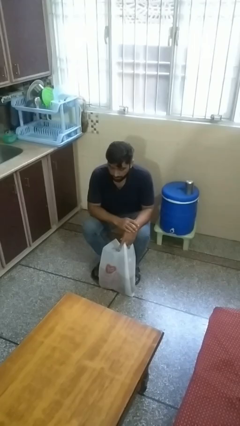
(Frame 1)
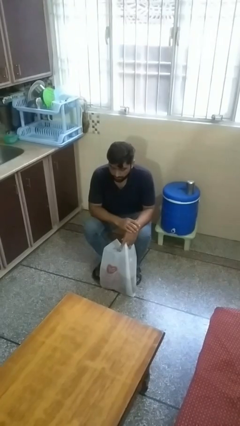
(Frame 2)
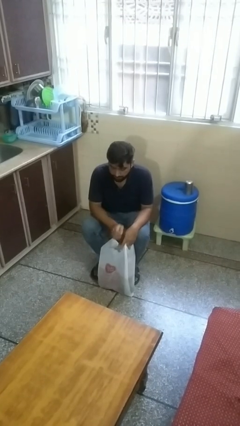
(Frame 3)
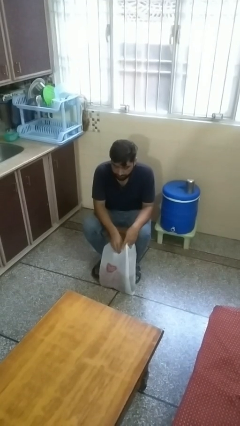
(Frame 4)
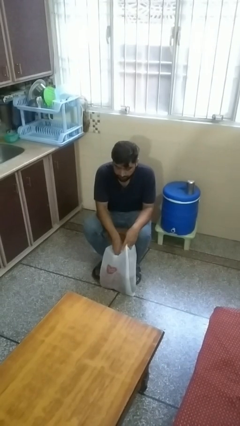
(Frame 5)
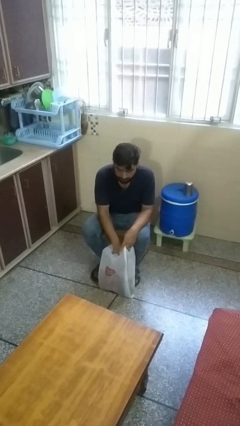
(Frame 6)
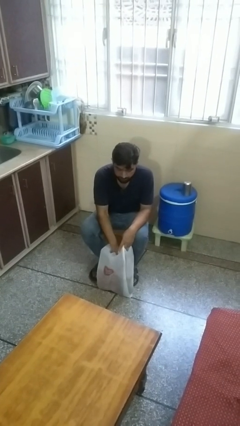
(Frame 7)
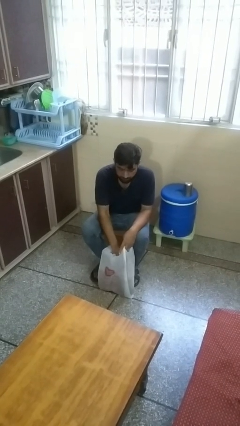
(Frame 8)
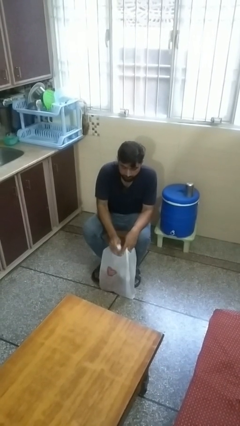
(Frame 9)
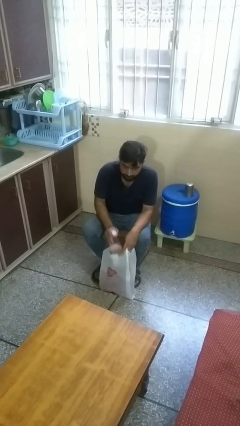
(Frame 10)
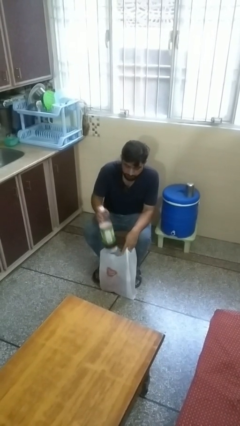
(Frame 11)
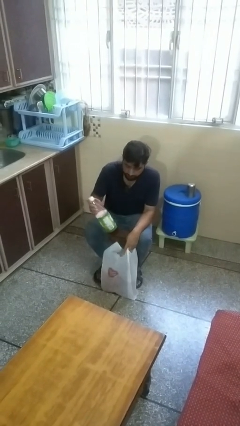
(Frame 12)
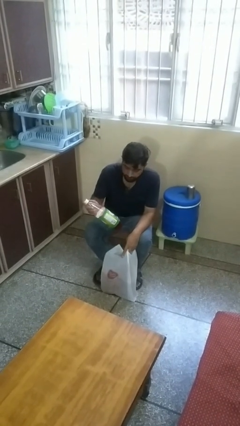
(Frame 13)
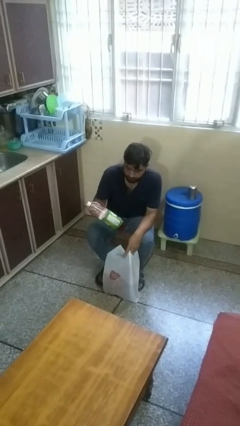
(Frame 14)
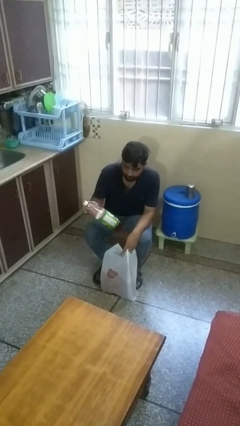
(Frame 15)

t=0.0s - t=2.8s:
person takes object from bag

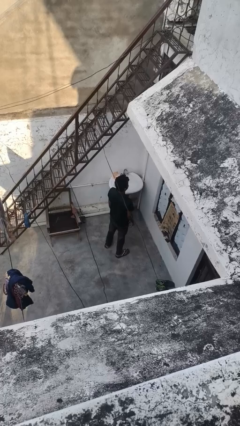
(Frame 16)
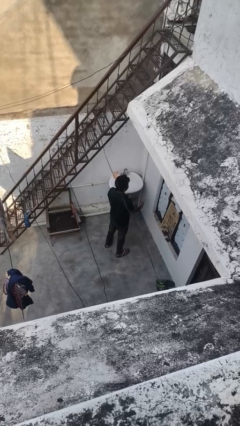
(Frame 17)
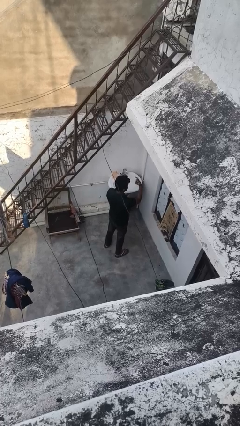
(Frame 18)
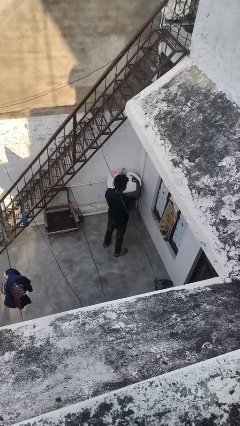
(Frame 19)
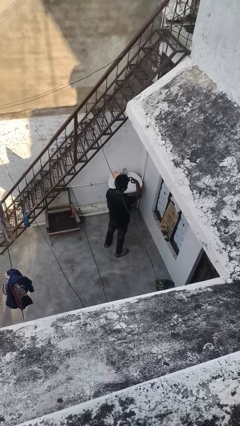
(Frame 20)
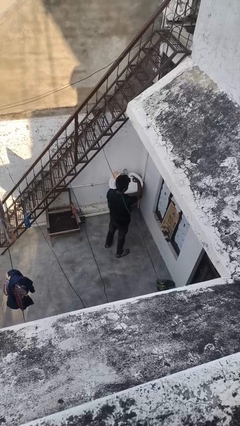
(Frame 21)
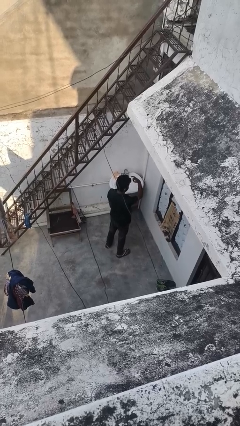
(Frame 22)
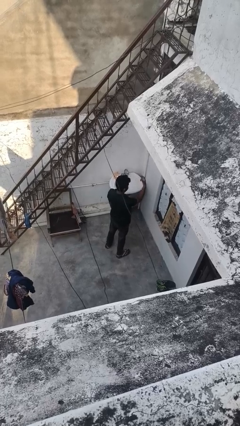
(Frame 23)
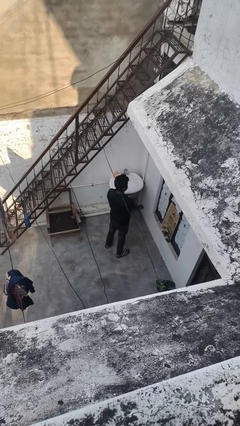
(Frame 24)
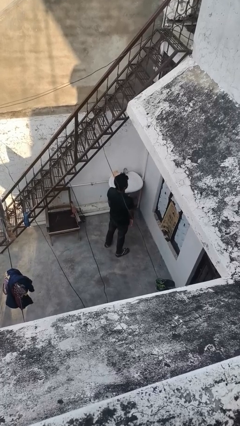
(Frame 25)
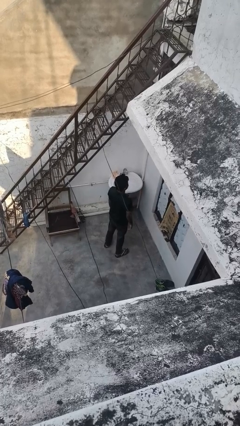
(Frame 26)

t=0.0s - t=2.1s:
person gestures watch closely

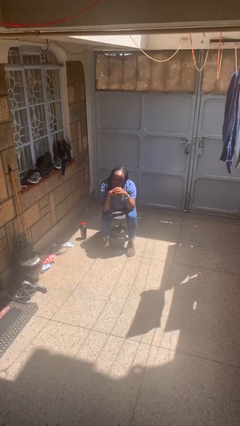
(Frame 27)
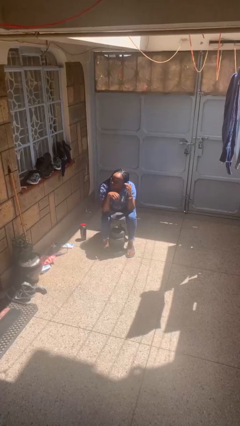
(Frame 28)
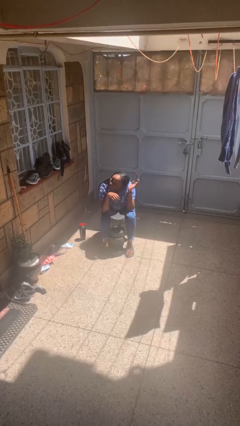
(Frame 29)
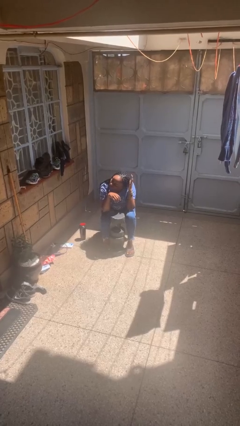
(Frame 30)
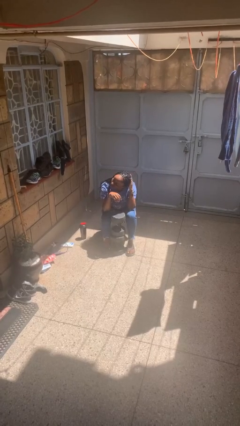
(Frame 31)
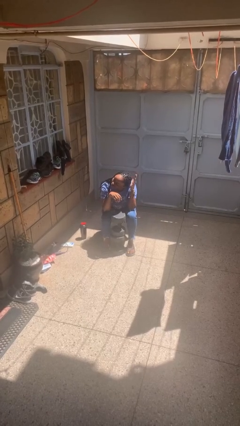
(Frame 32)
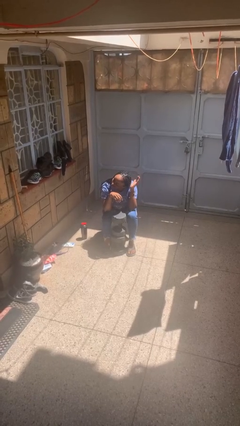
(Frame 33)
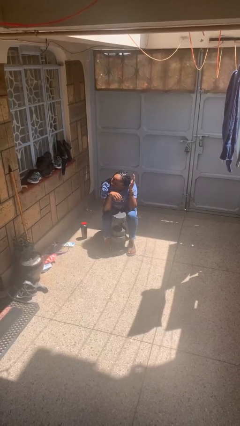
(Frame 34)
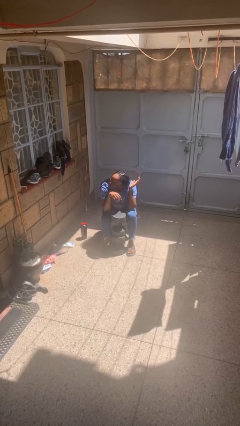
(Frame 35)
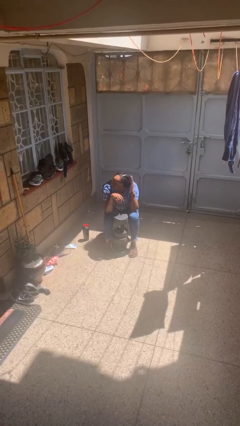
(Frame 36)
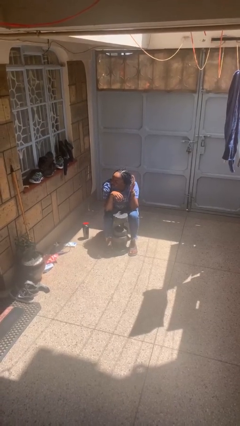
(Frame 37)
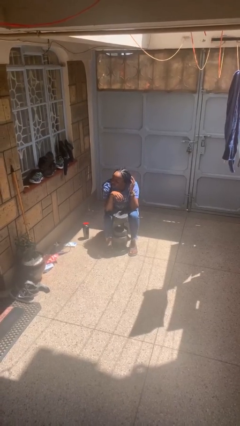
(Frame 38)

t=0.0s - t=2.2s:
person pats head

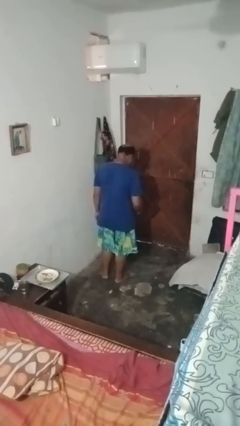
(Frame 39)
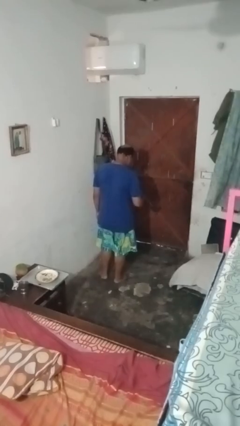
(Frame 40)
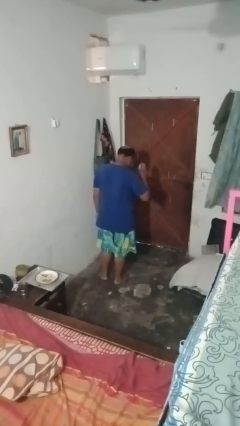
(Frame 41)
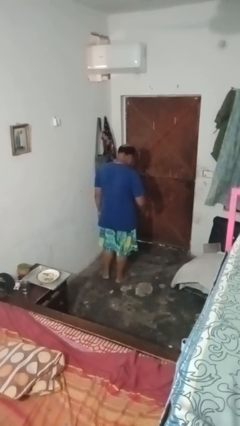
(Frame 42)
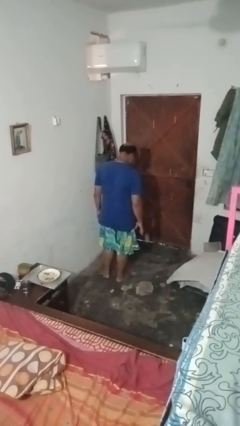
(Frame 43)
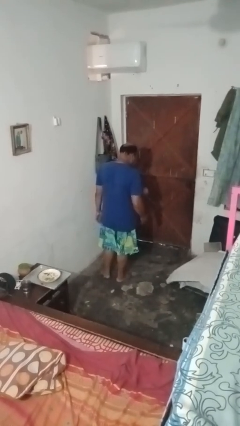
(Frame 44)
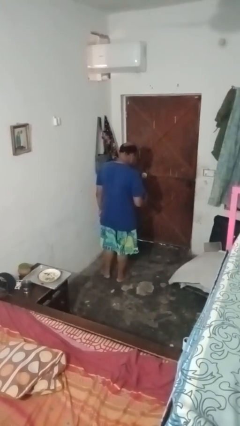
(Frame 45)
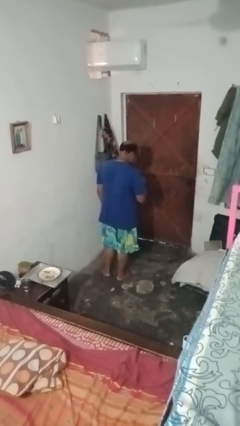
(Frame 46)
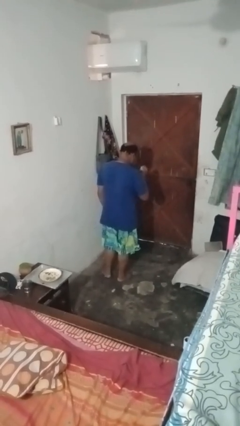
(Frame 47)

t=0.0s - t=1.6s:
person bounces ball on floor

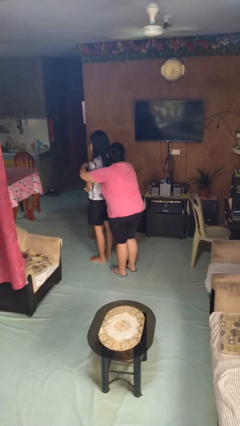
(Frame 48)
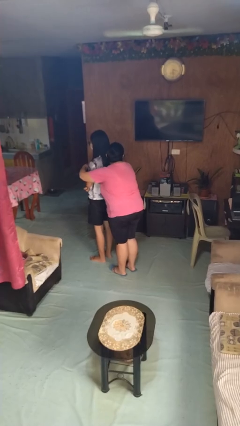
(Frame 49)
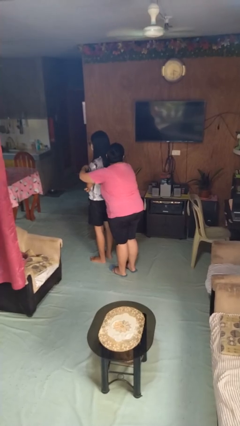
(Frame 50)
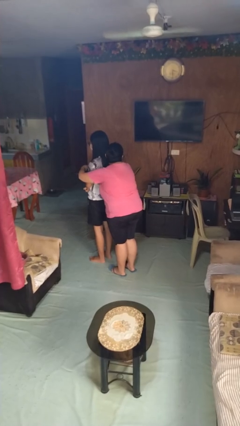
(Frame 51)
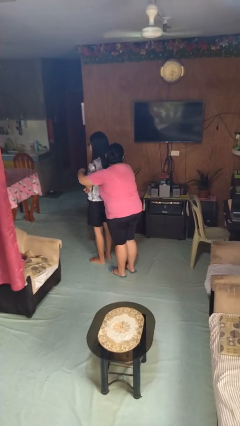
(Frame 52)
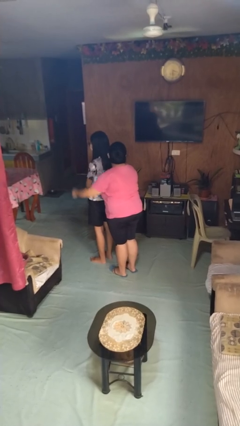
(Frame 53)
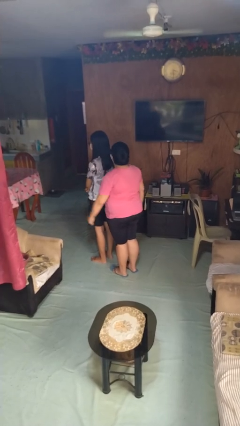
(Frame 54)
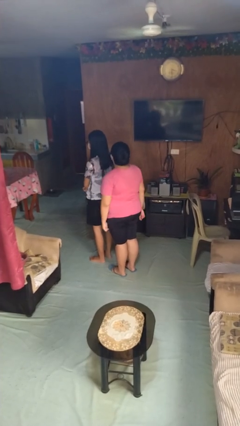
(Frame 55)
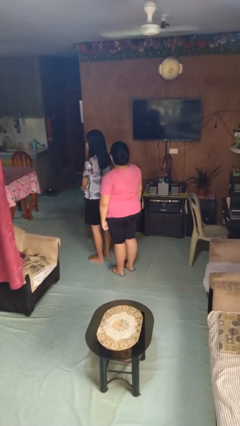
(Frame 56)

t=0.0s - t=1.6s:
person hugs person from behind

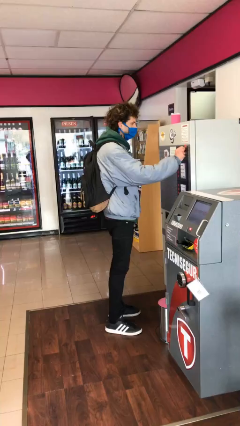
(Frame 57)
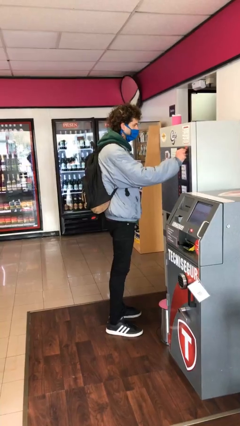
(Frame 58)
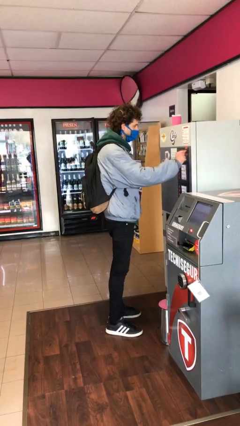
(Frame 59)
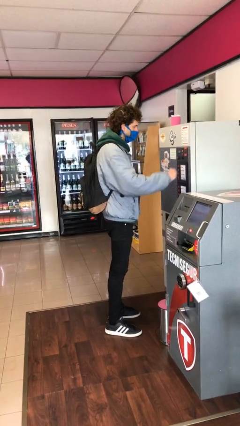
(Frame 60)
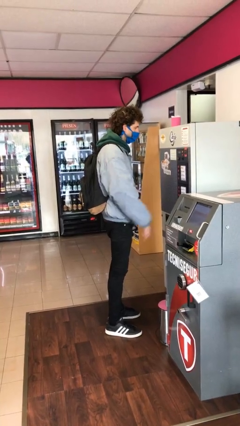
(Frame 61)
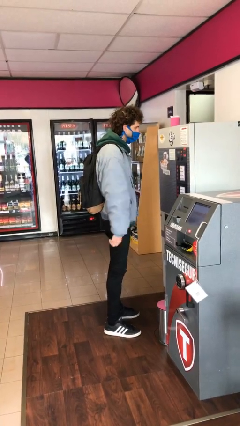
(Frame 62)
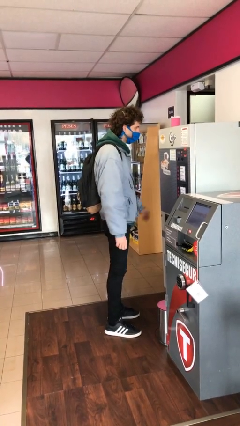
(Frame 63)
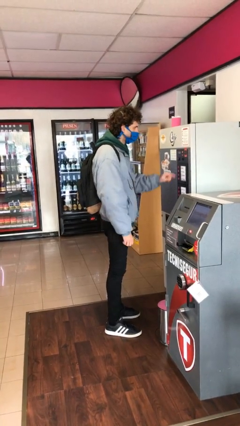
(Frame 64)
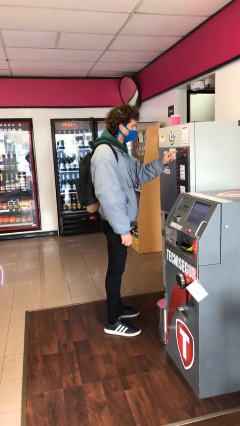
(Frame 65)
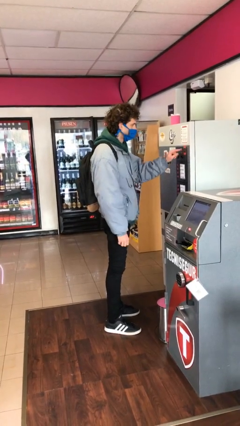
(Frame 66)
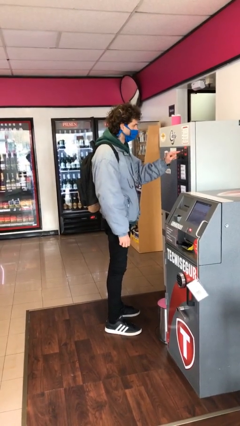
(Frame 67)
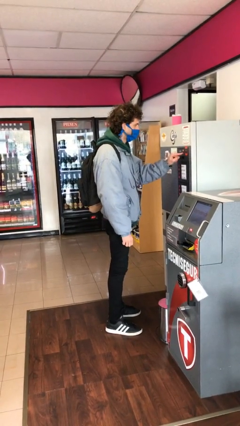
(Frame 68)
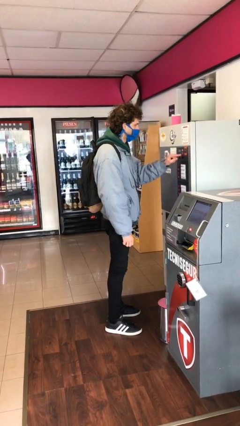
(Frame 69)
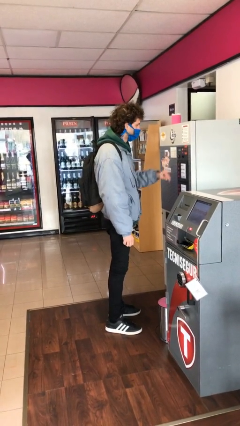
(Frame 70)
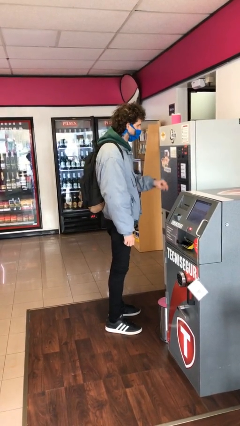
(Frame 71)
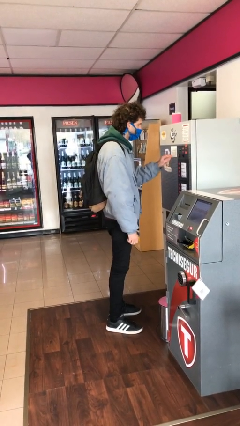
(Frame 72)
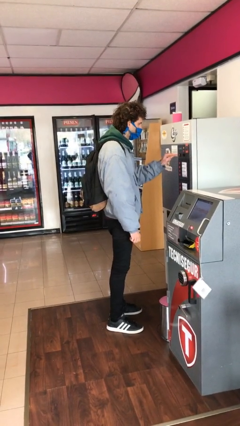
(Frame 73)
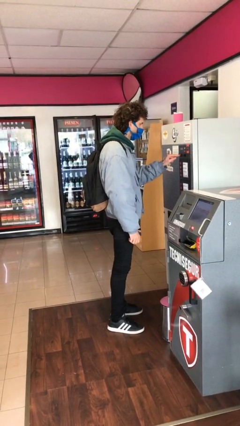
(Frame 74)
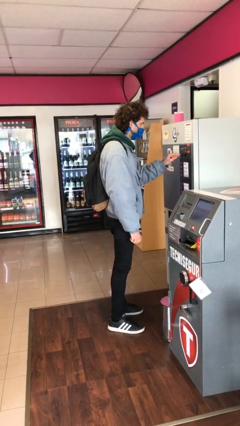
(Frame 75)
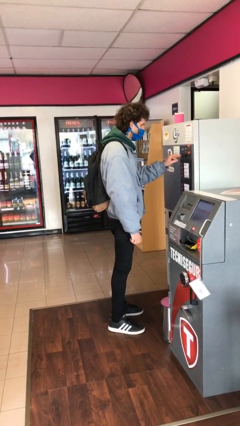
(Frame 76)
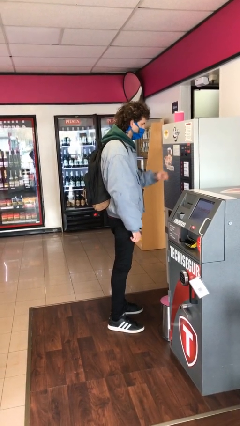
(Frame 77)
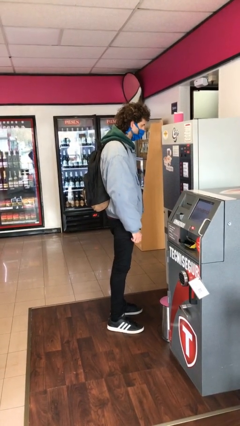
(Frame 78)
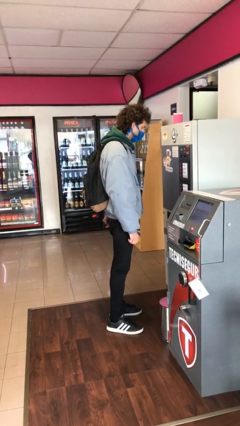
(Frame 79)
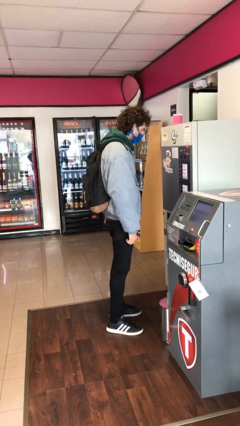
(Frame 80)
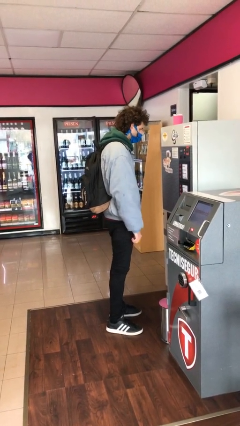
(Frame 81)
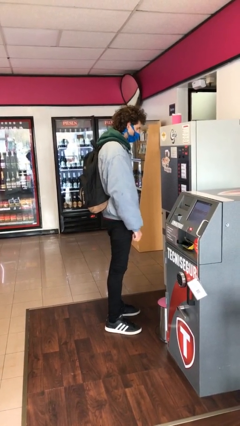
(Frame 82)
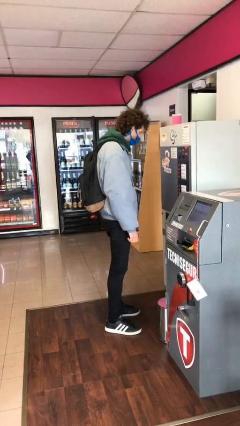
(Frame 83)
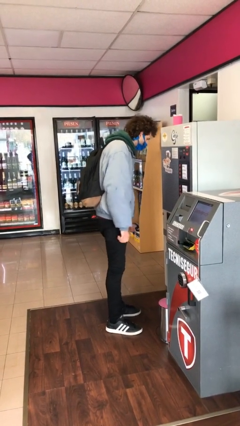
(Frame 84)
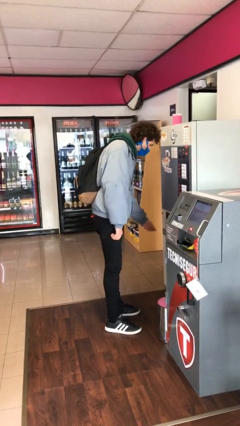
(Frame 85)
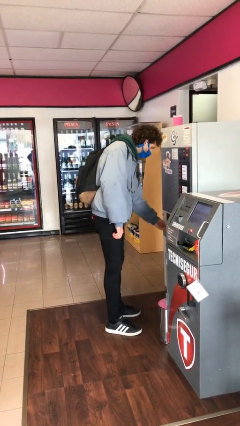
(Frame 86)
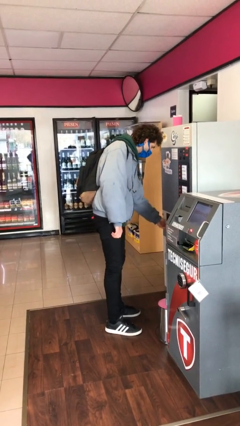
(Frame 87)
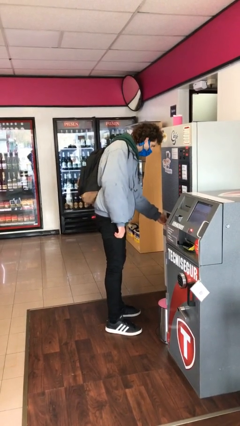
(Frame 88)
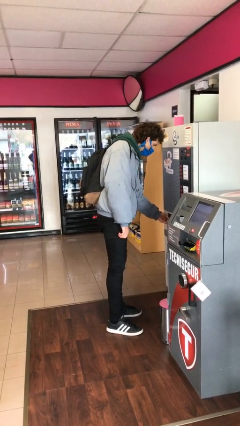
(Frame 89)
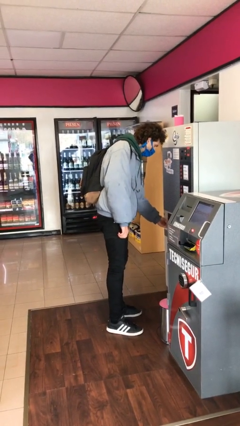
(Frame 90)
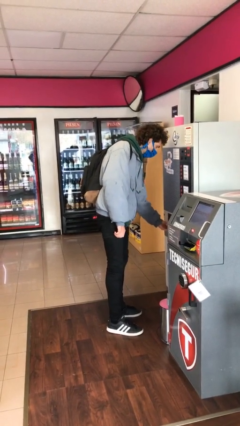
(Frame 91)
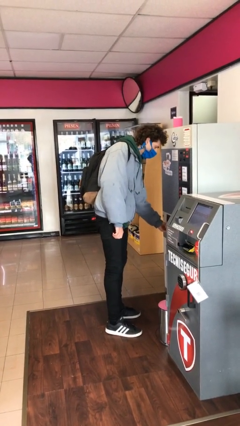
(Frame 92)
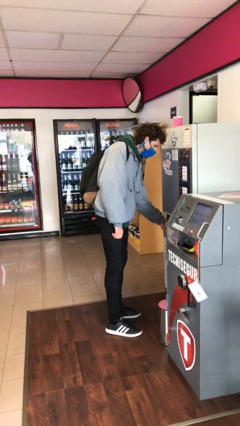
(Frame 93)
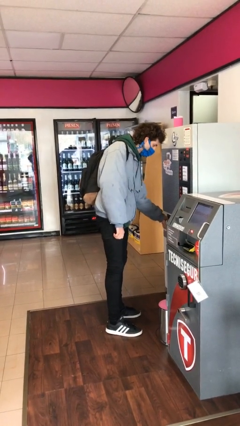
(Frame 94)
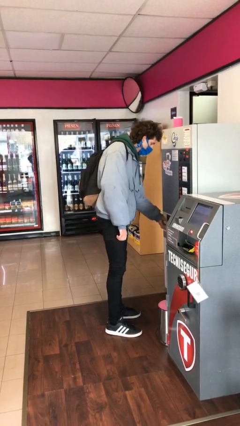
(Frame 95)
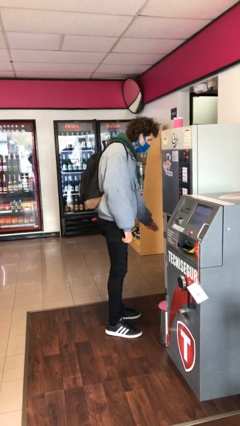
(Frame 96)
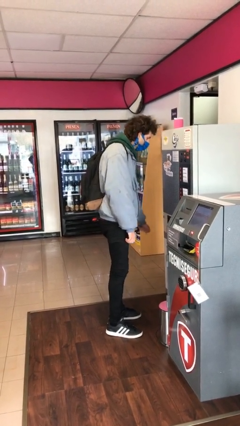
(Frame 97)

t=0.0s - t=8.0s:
person purchases from machine
